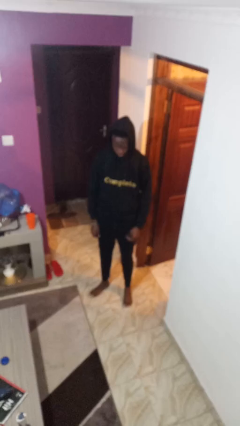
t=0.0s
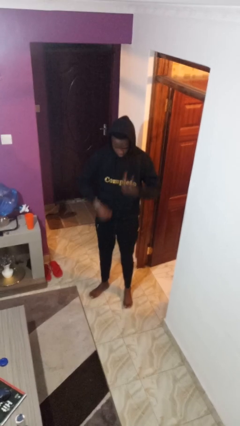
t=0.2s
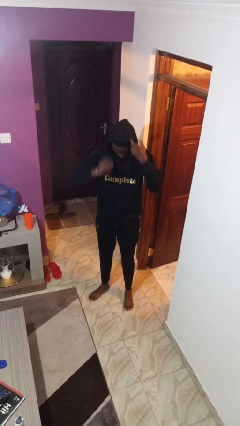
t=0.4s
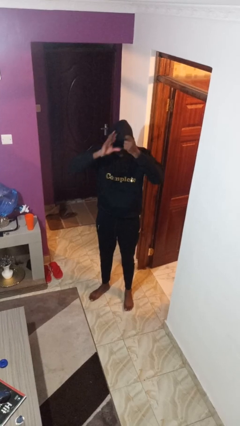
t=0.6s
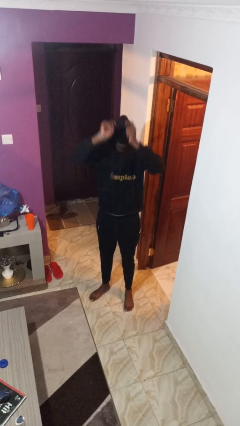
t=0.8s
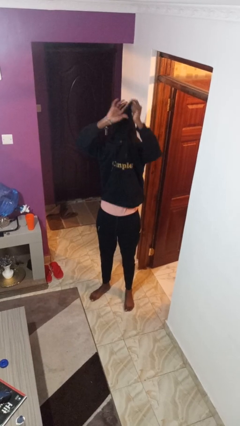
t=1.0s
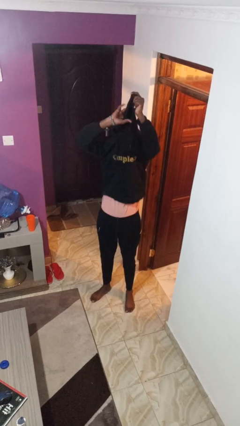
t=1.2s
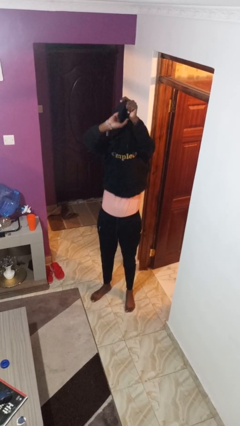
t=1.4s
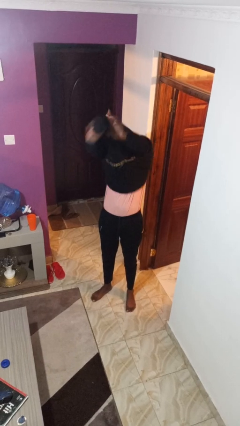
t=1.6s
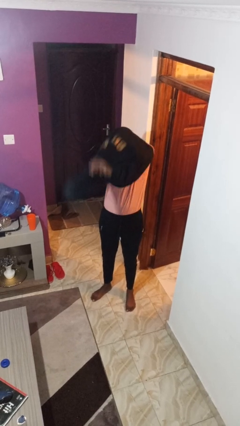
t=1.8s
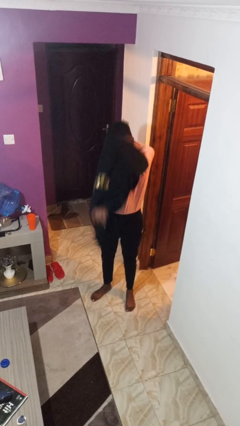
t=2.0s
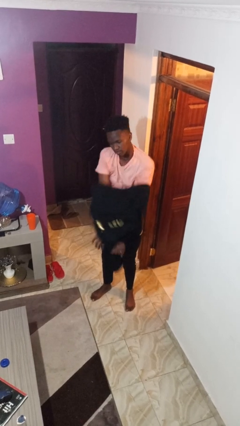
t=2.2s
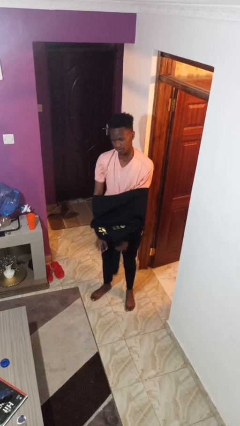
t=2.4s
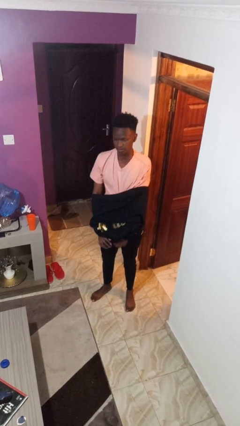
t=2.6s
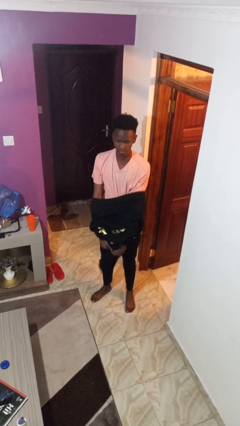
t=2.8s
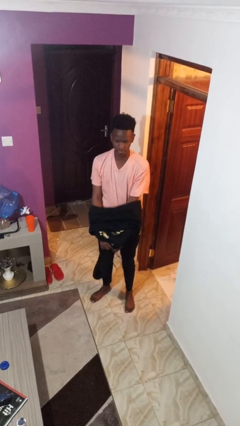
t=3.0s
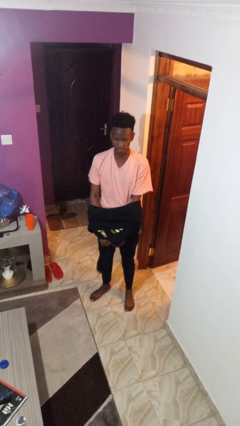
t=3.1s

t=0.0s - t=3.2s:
person takes off hoodie

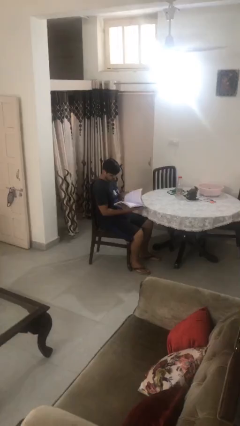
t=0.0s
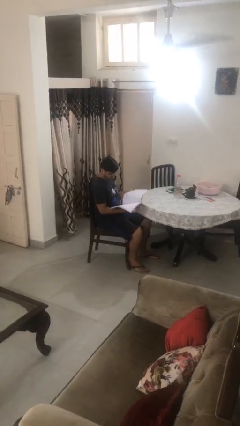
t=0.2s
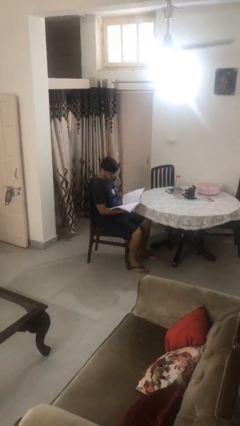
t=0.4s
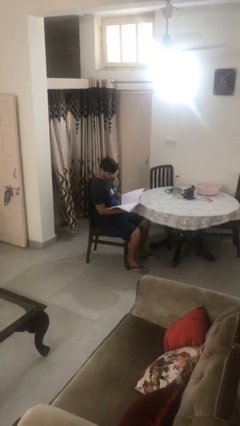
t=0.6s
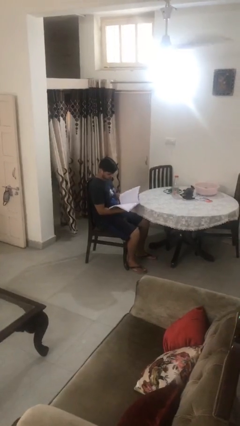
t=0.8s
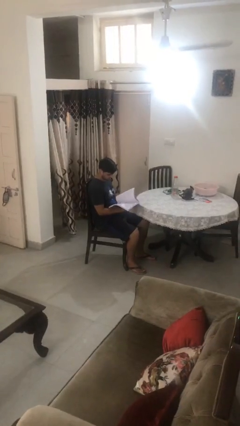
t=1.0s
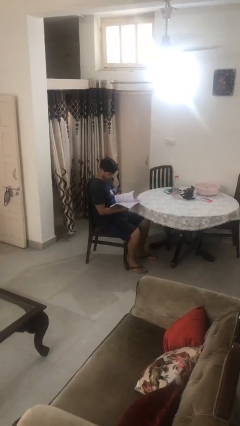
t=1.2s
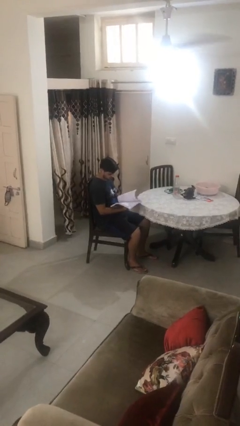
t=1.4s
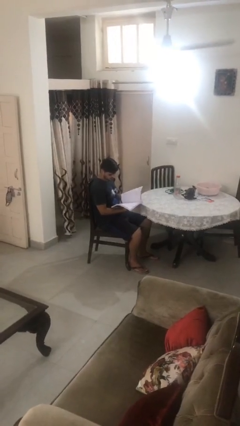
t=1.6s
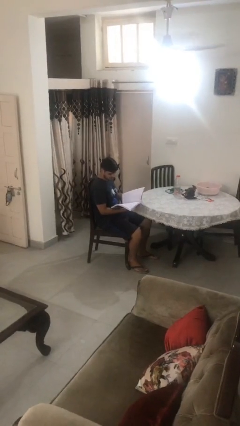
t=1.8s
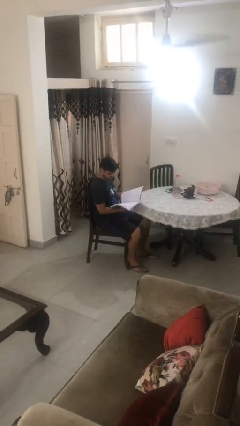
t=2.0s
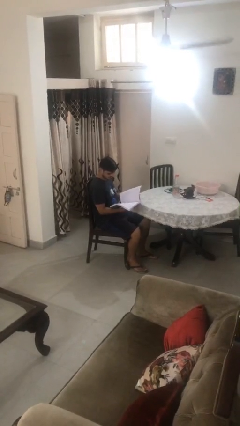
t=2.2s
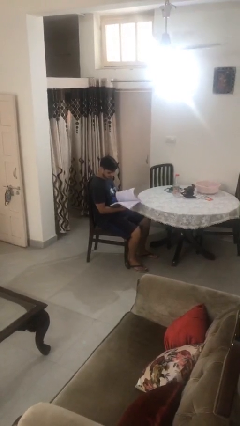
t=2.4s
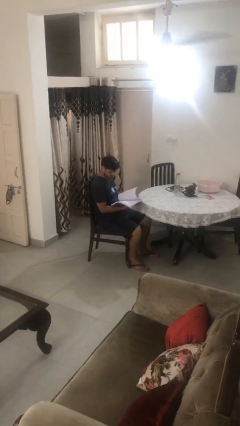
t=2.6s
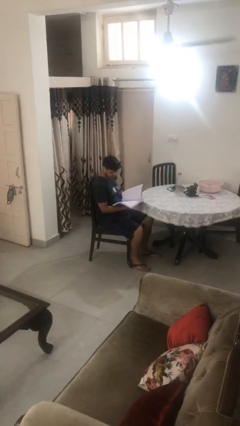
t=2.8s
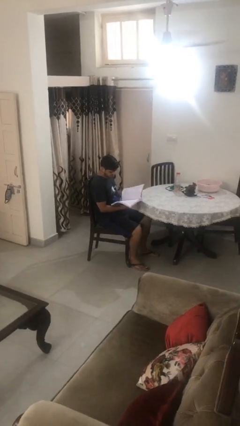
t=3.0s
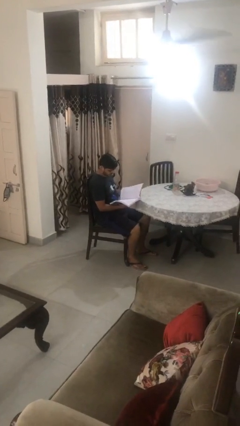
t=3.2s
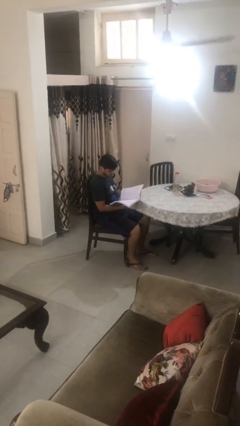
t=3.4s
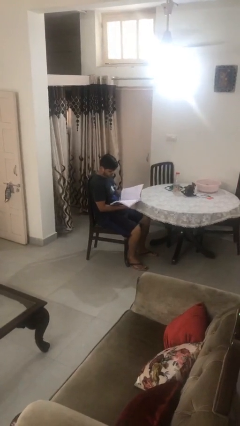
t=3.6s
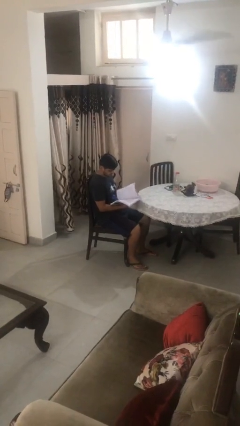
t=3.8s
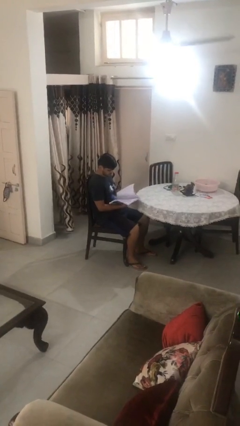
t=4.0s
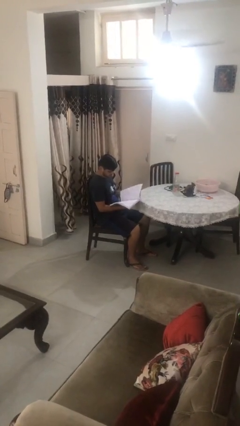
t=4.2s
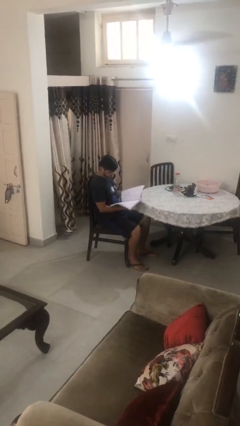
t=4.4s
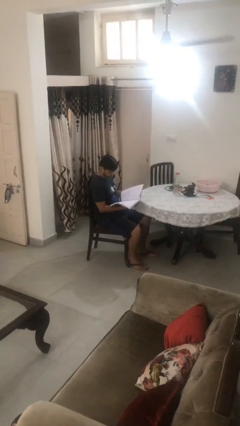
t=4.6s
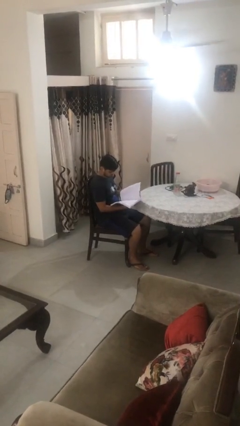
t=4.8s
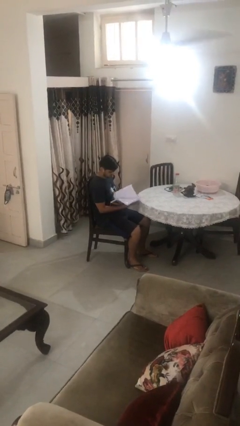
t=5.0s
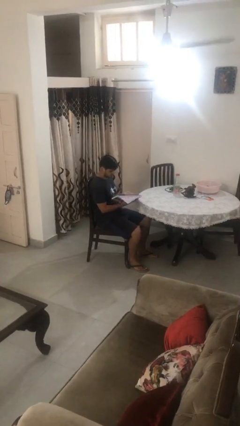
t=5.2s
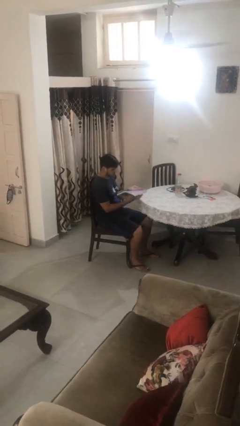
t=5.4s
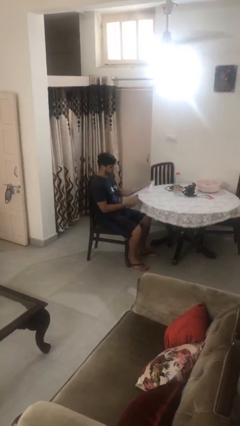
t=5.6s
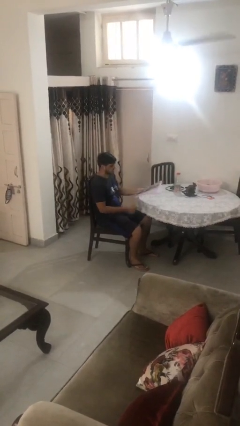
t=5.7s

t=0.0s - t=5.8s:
person reads document

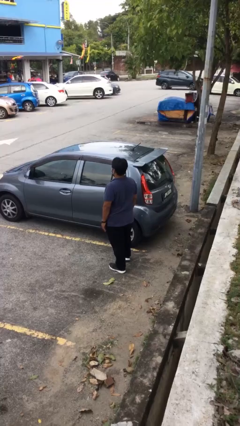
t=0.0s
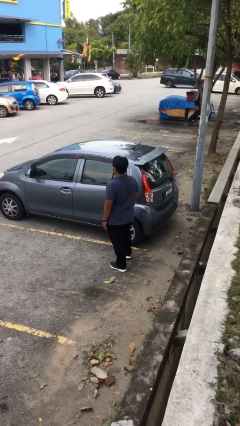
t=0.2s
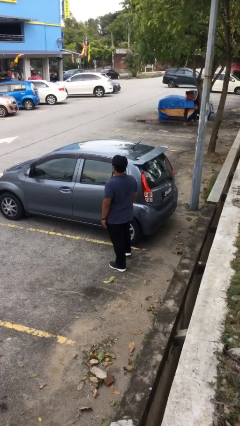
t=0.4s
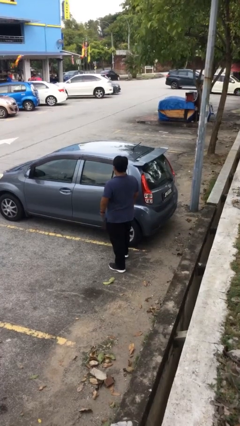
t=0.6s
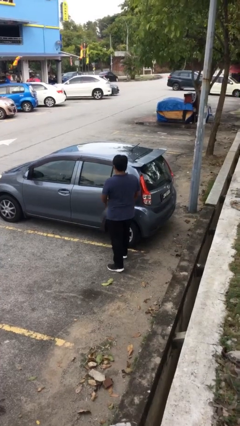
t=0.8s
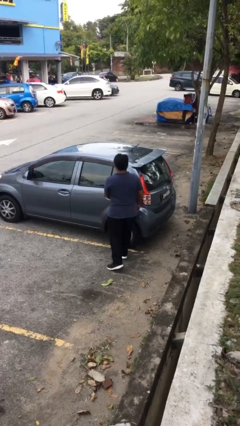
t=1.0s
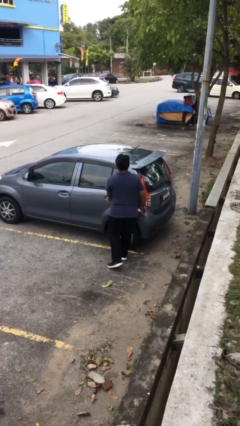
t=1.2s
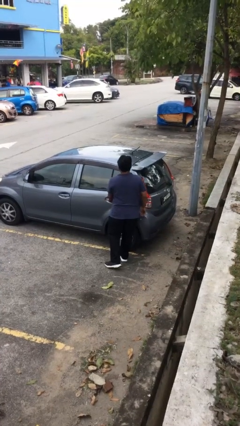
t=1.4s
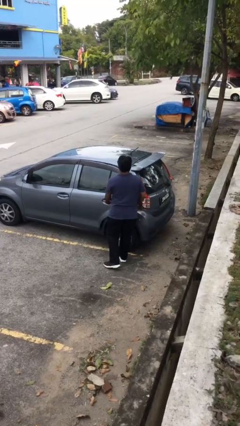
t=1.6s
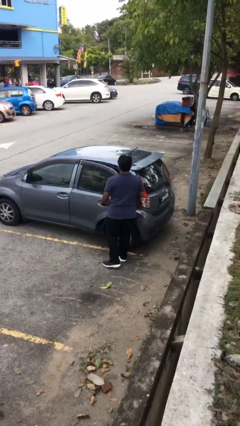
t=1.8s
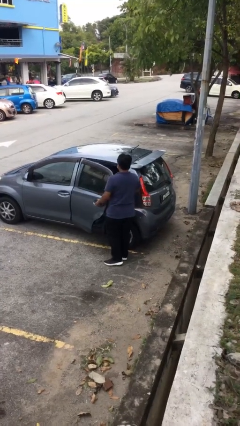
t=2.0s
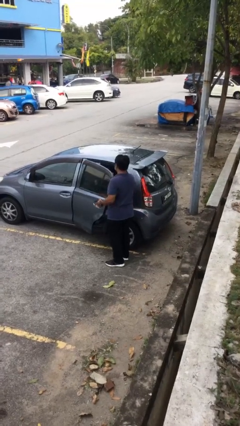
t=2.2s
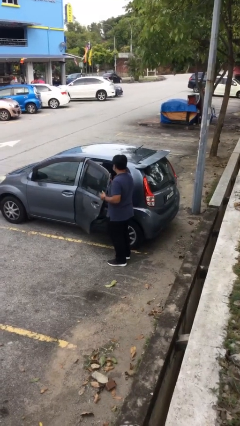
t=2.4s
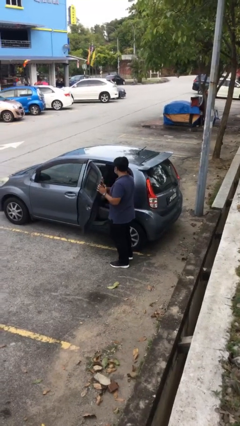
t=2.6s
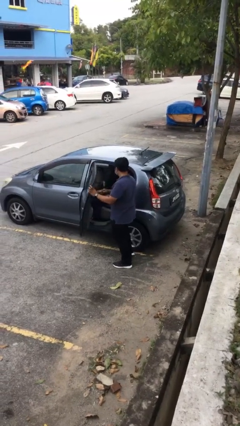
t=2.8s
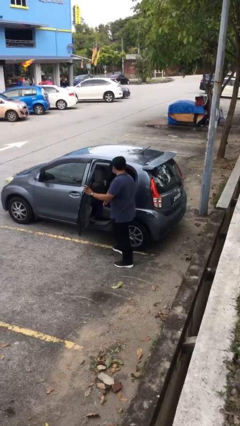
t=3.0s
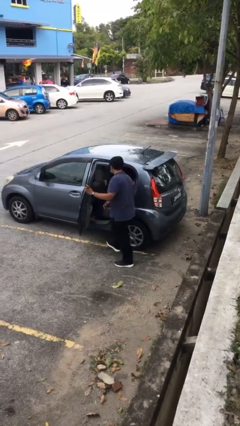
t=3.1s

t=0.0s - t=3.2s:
person opens car door

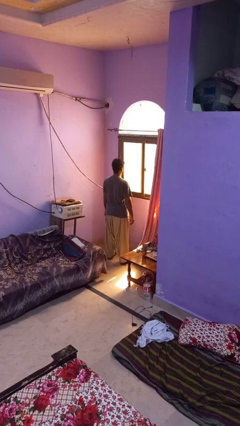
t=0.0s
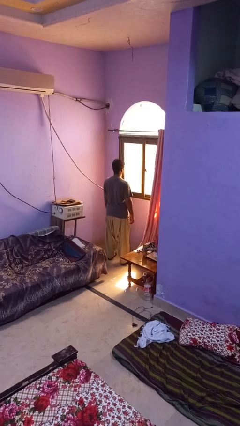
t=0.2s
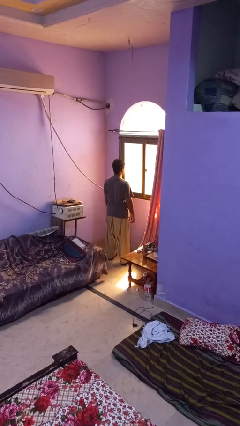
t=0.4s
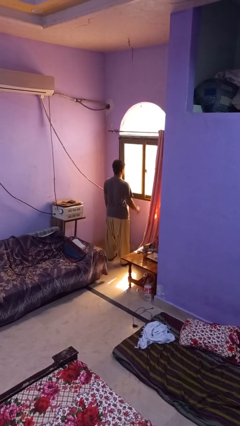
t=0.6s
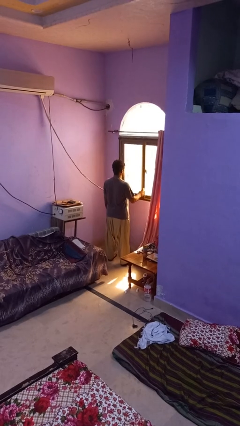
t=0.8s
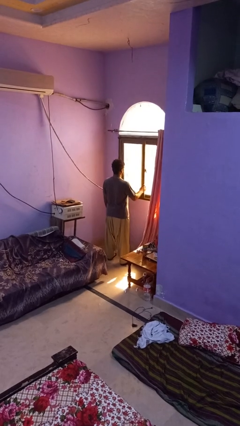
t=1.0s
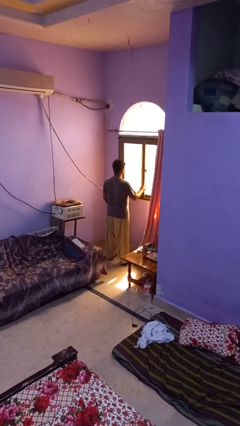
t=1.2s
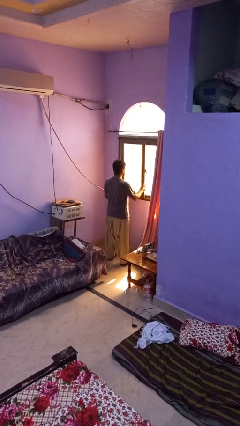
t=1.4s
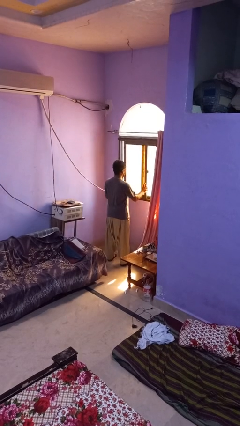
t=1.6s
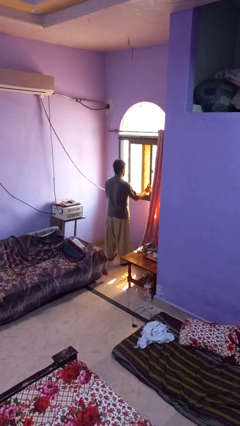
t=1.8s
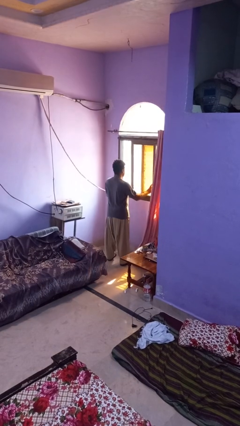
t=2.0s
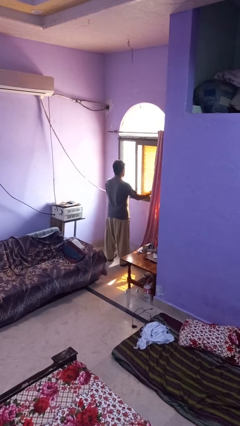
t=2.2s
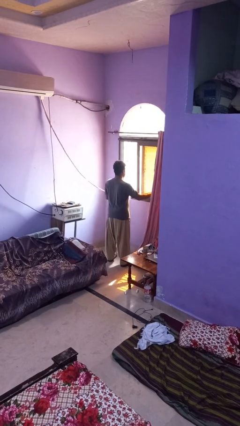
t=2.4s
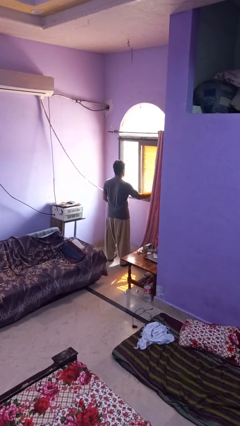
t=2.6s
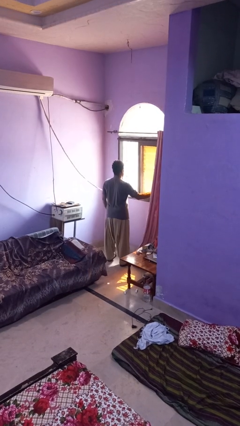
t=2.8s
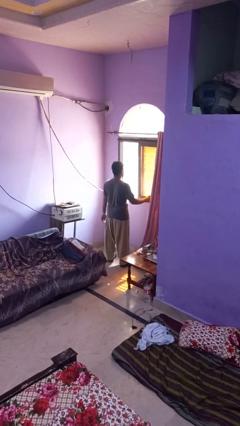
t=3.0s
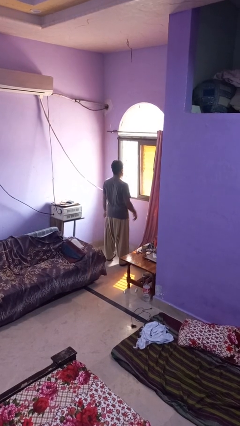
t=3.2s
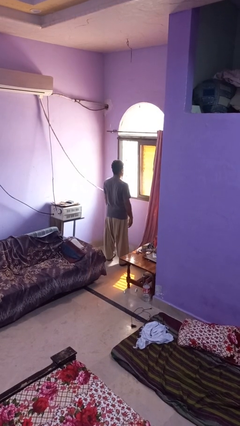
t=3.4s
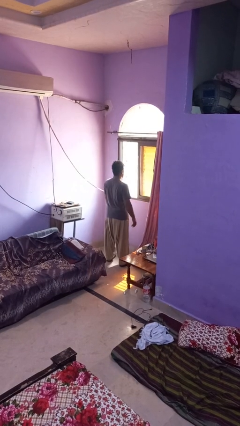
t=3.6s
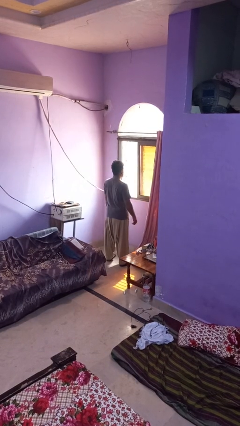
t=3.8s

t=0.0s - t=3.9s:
person opens home window

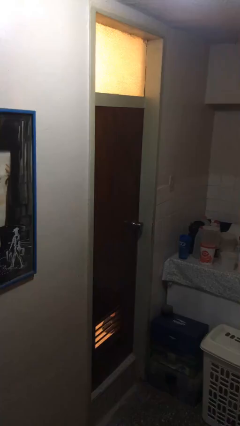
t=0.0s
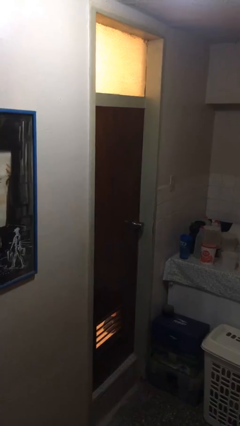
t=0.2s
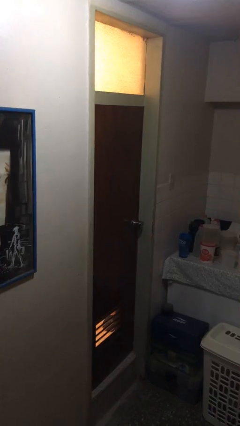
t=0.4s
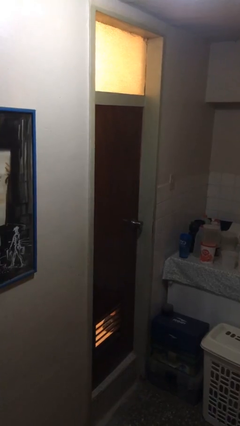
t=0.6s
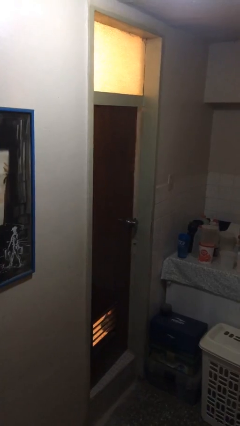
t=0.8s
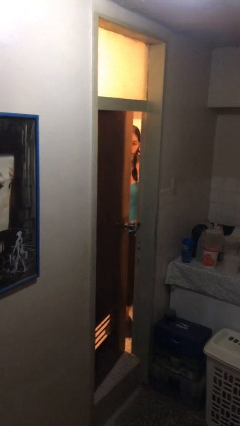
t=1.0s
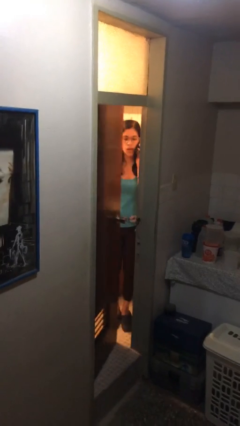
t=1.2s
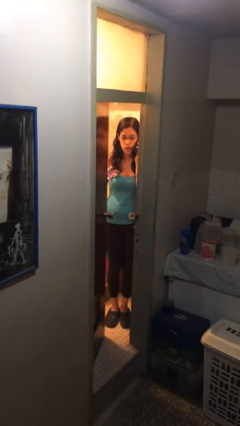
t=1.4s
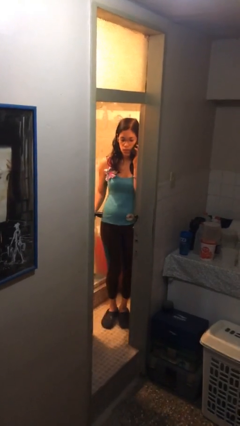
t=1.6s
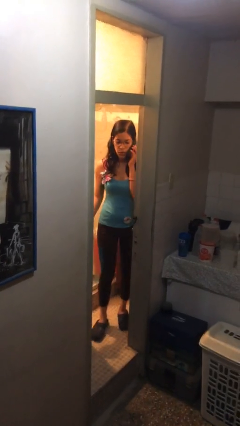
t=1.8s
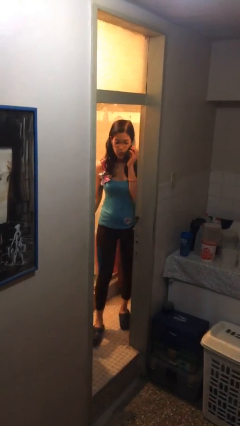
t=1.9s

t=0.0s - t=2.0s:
person opens facility door

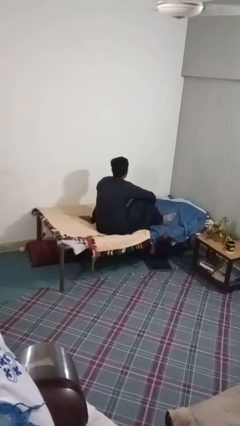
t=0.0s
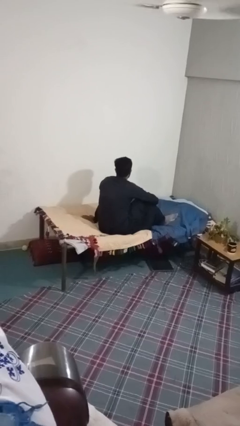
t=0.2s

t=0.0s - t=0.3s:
person rubs foot
